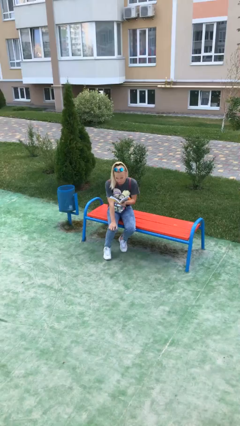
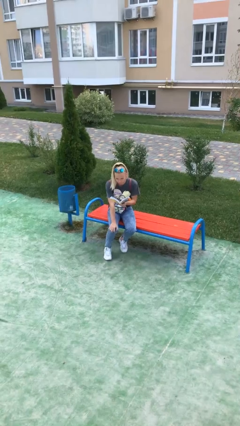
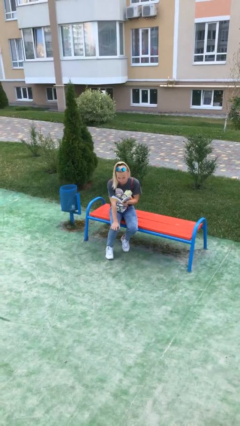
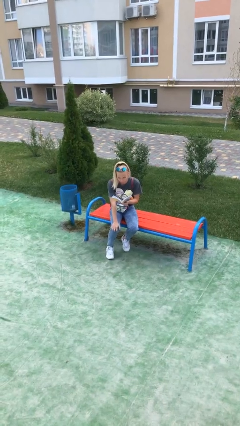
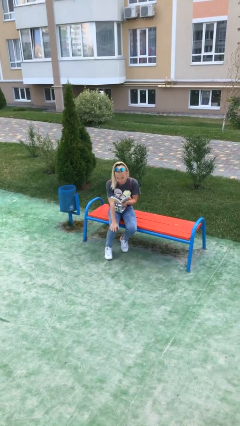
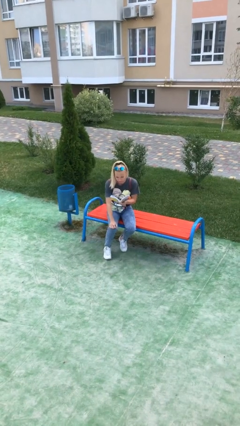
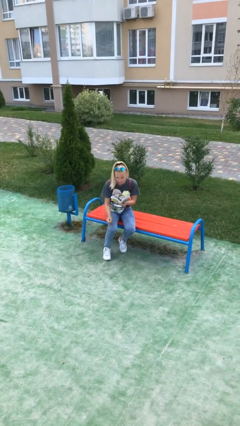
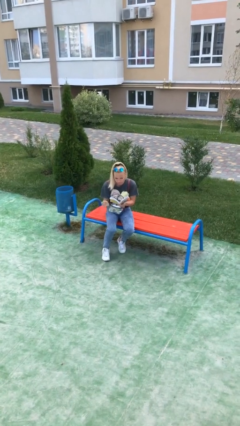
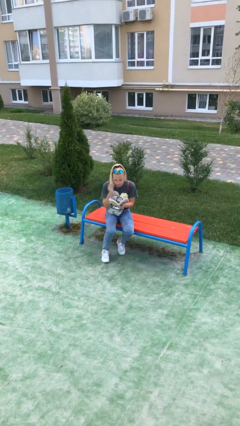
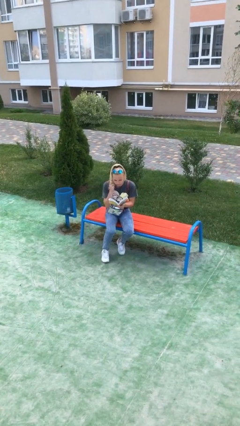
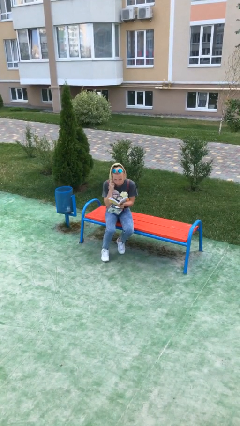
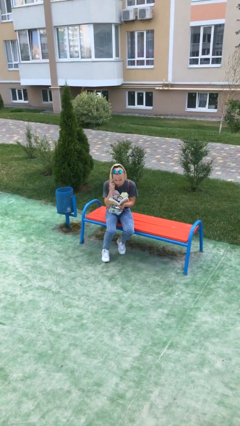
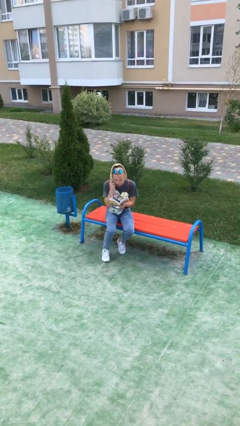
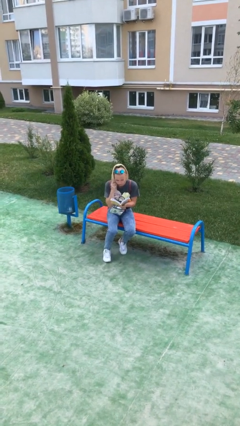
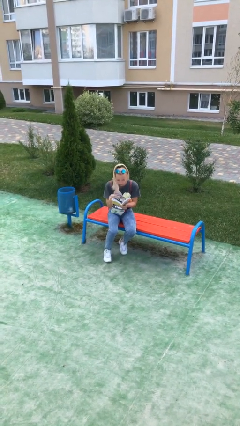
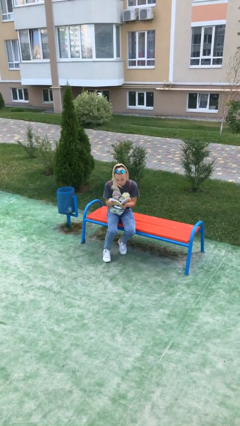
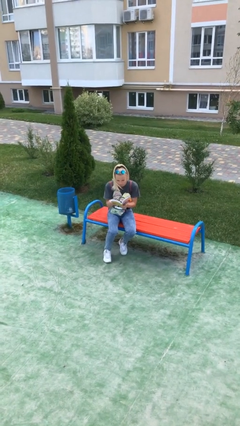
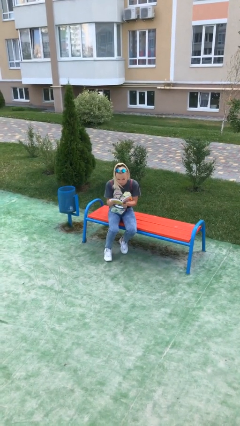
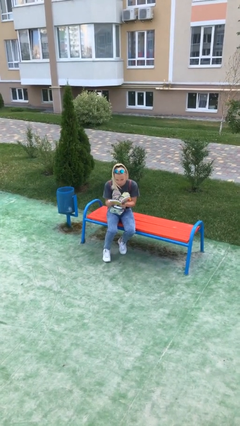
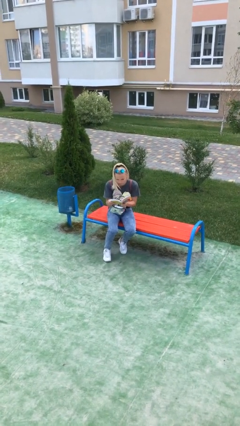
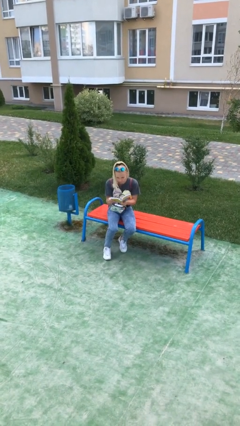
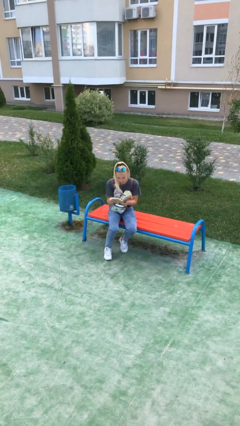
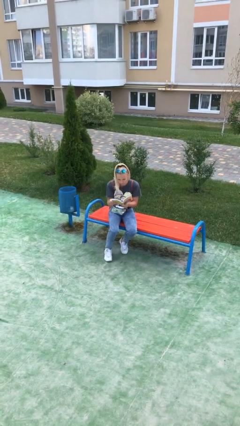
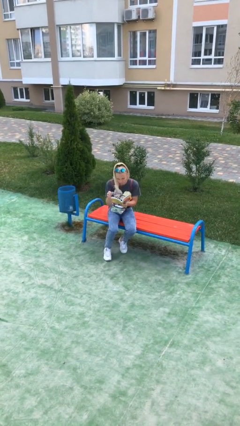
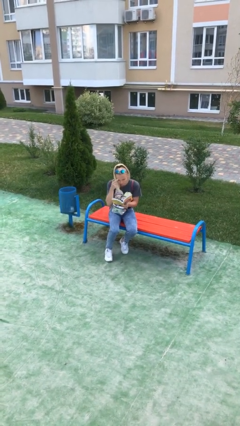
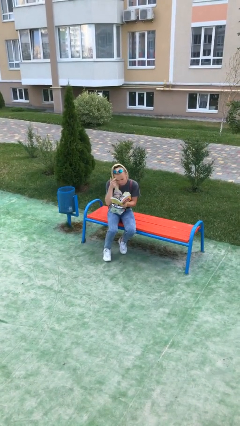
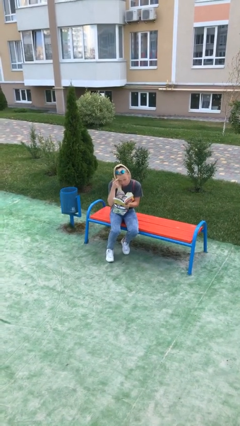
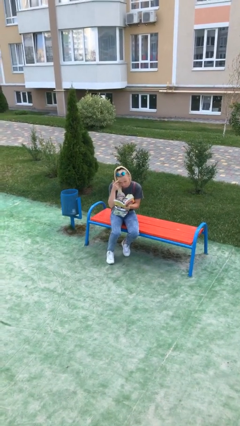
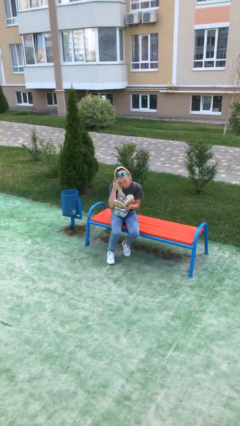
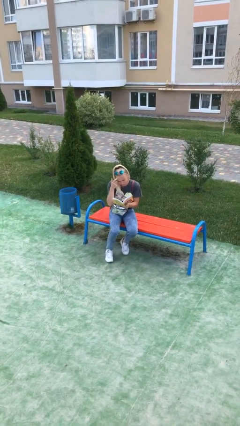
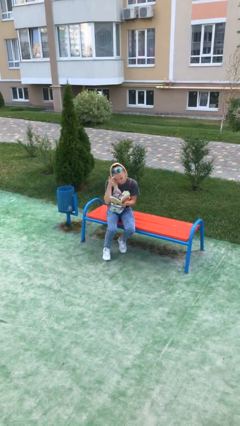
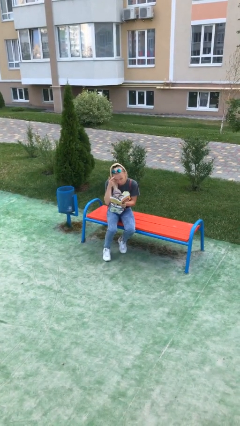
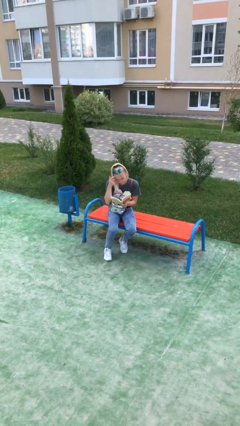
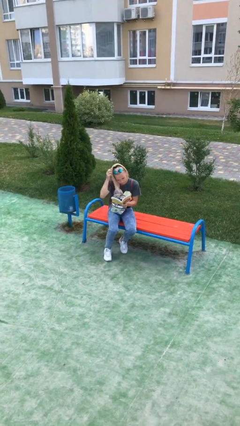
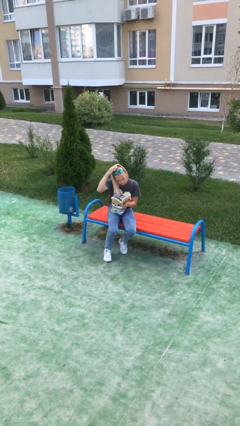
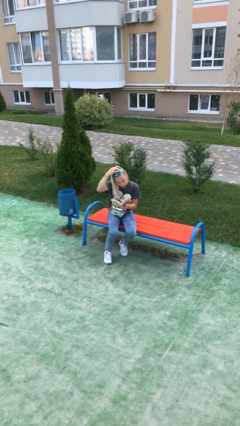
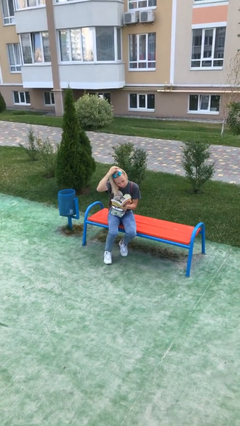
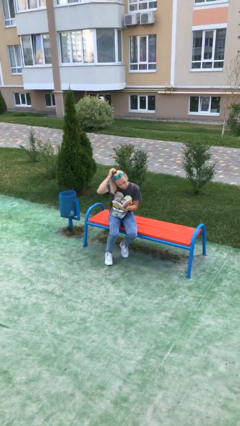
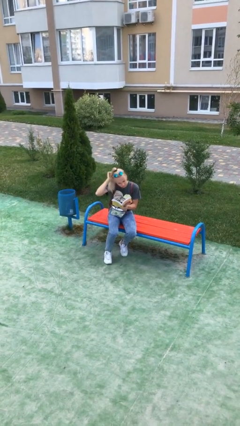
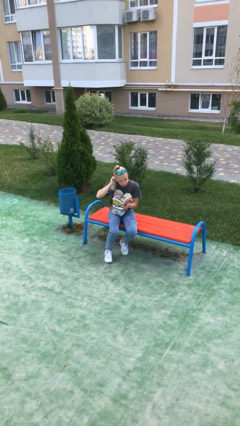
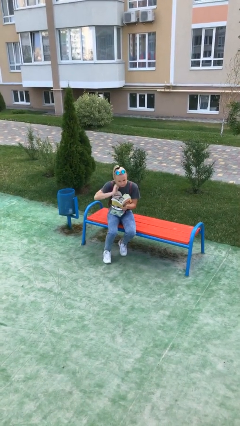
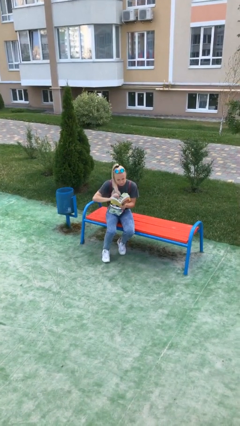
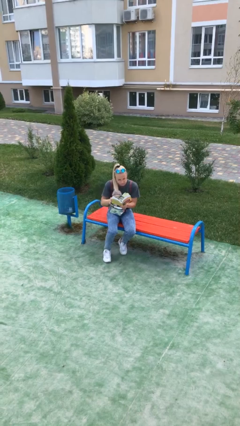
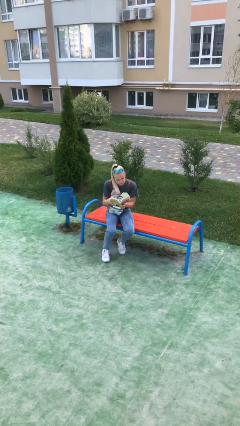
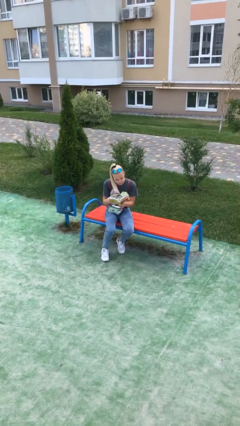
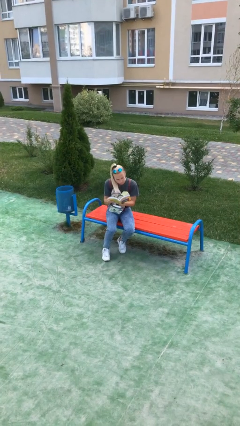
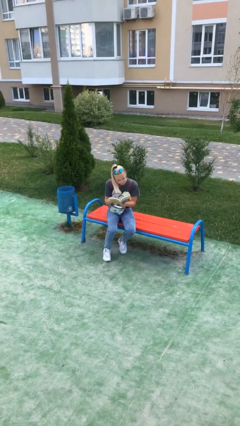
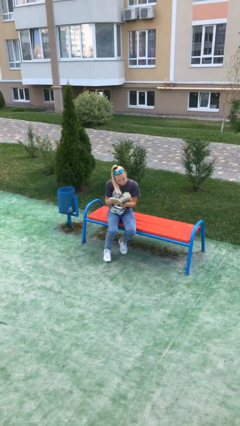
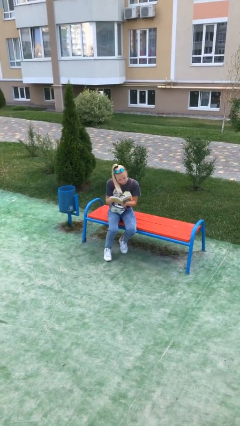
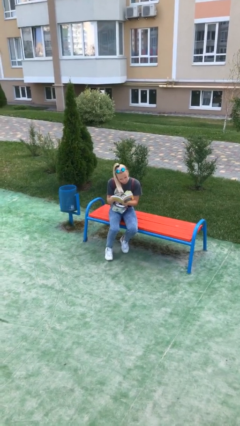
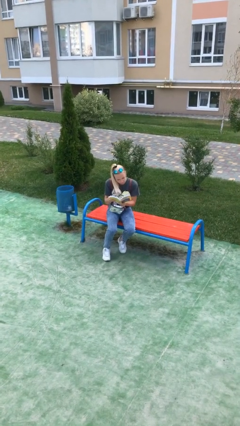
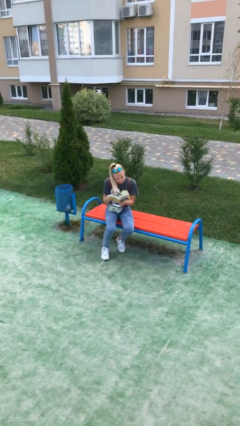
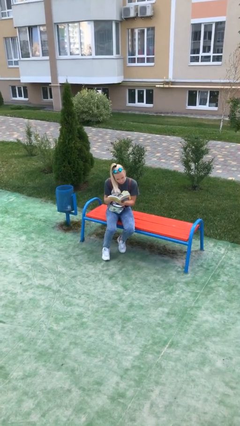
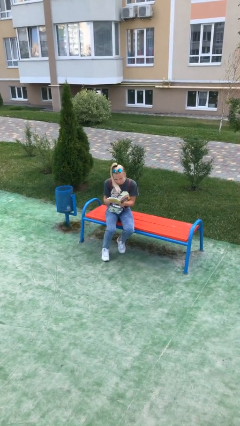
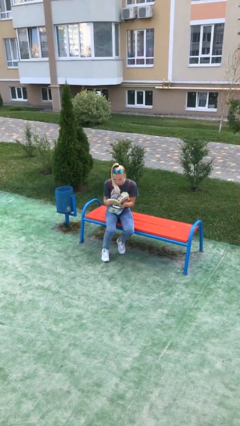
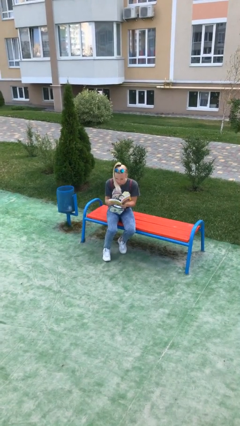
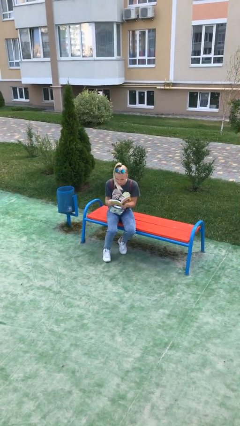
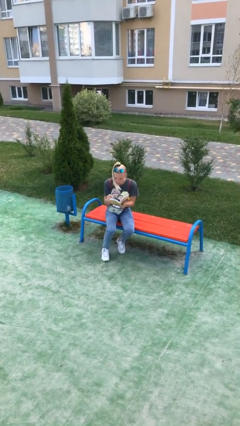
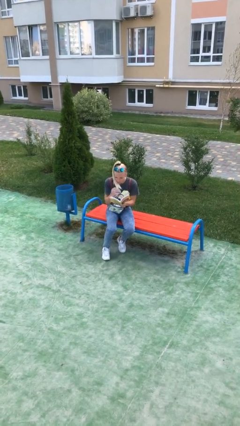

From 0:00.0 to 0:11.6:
person reads document

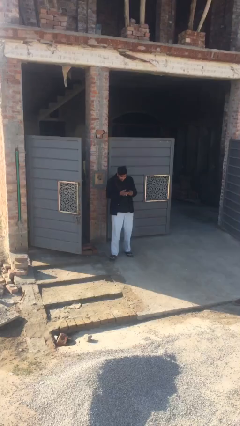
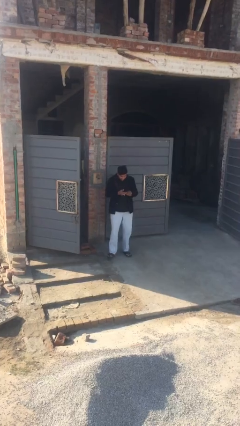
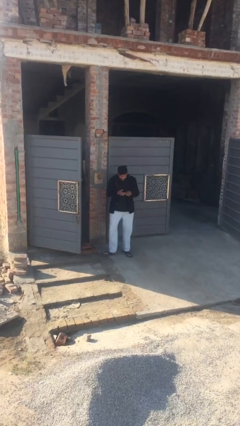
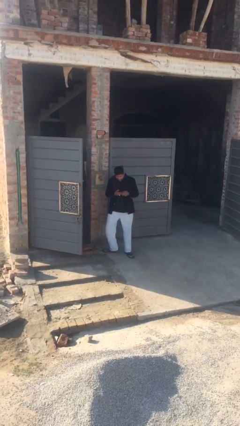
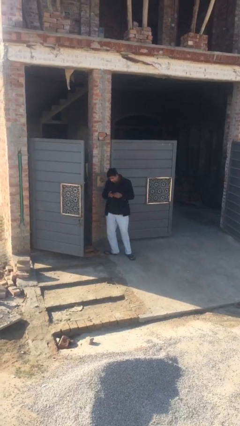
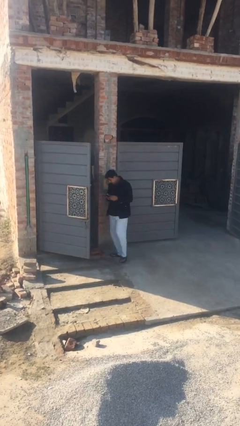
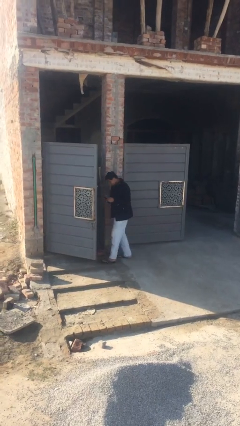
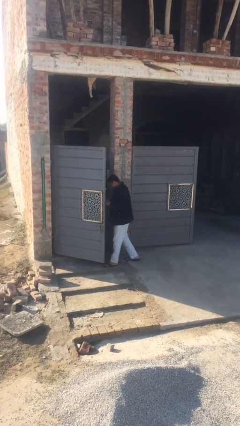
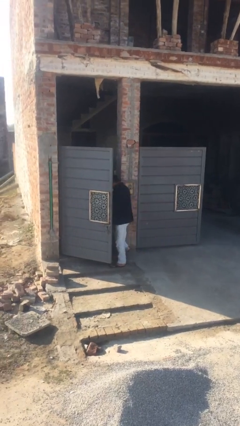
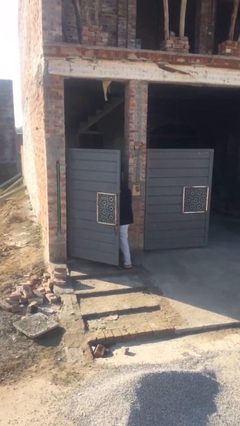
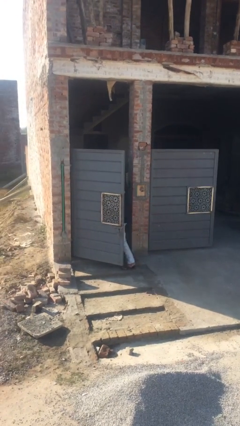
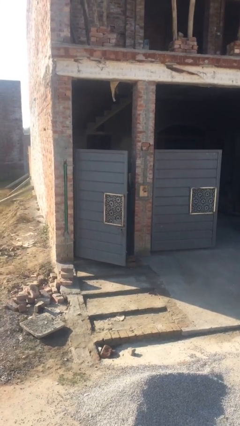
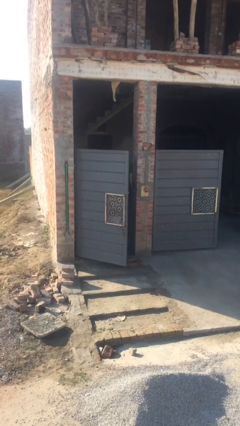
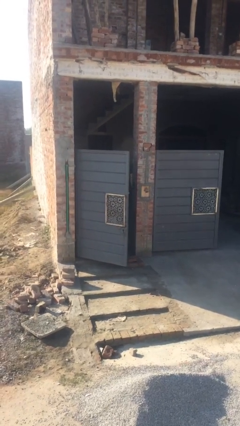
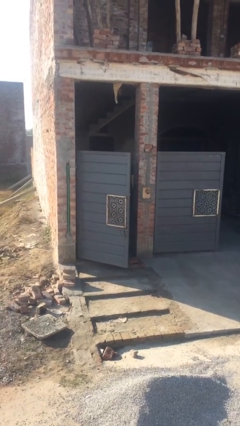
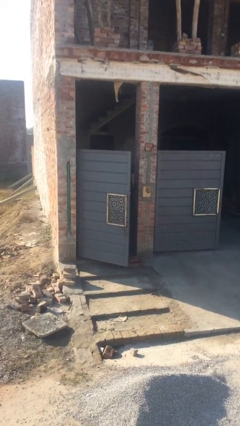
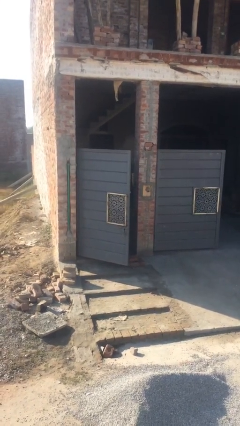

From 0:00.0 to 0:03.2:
person exits scene through structure

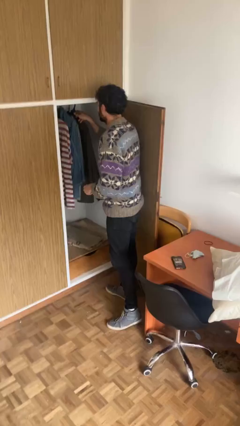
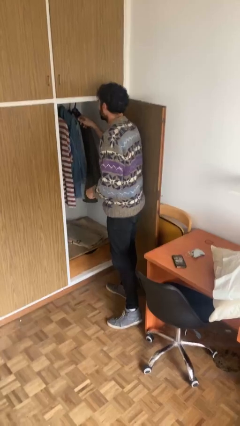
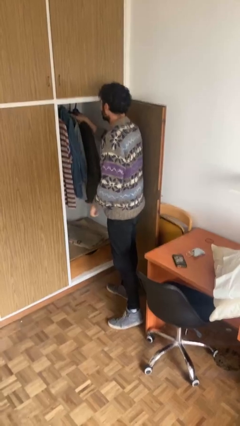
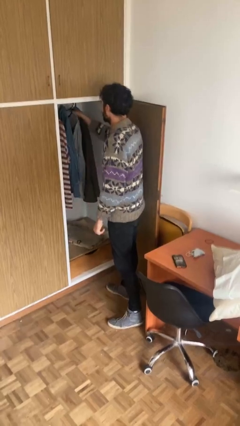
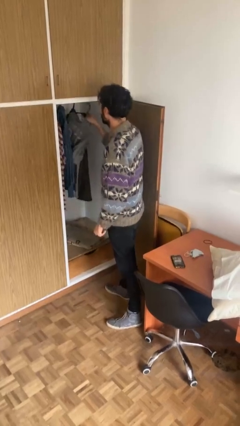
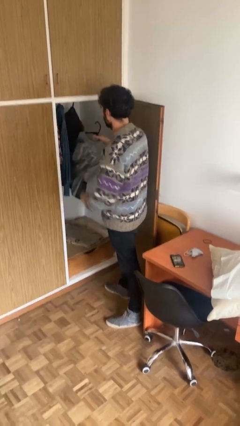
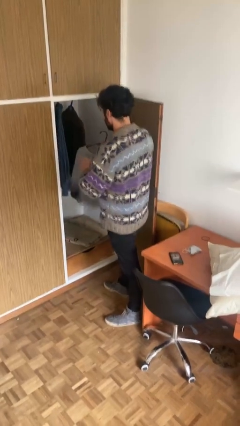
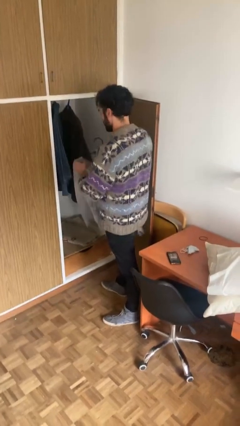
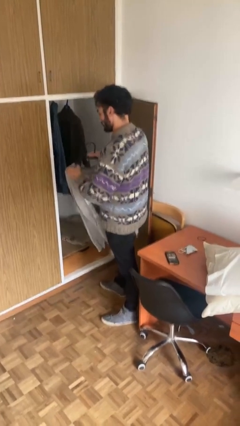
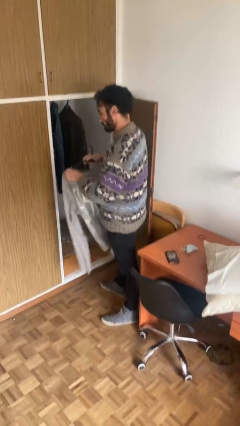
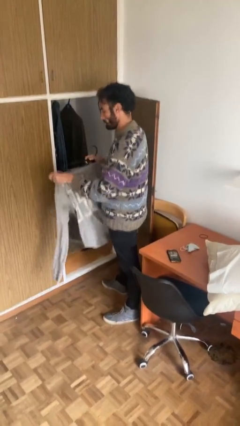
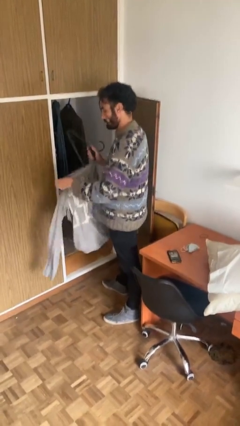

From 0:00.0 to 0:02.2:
person takes clothes from closet

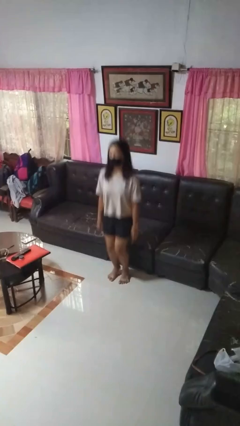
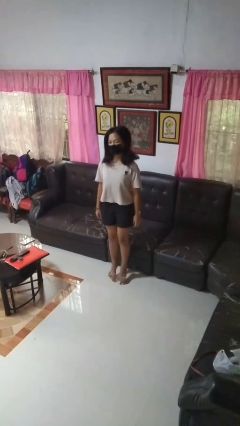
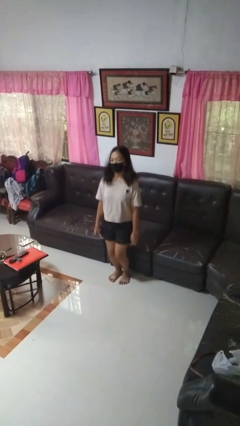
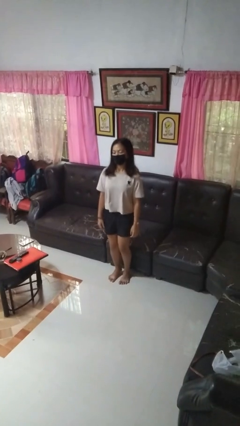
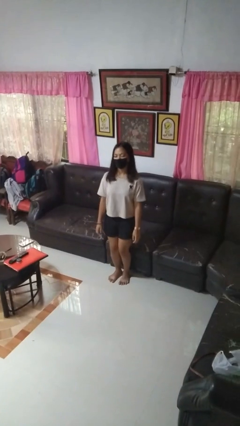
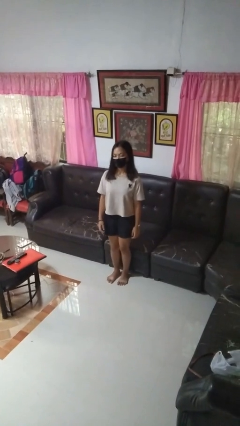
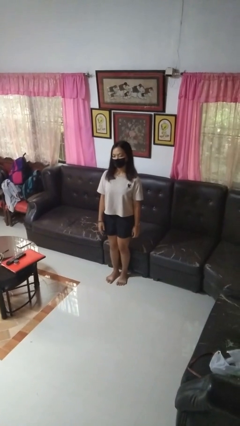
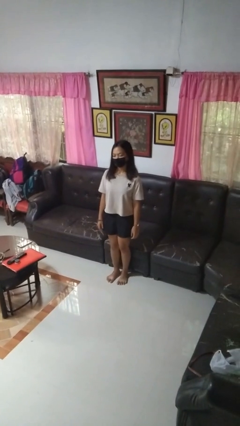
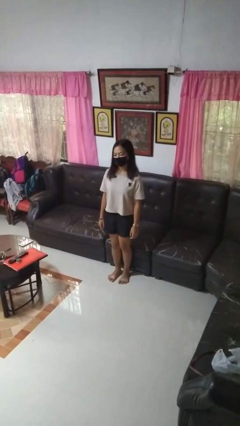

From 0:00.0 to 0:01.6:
person jumps
